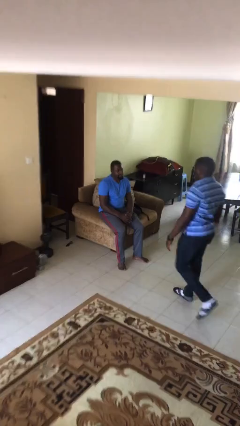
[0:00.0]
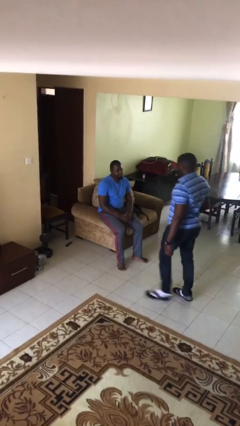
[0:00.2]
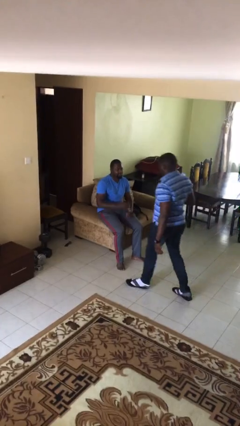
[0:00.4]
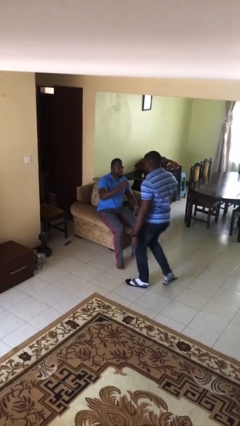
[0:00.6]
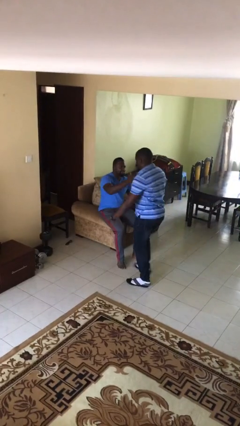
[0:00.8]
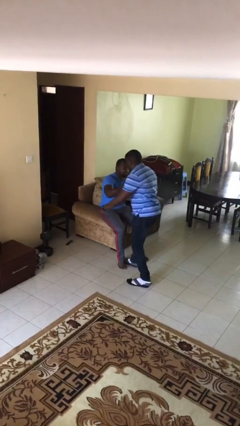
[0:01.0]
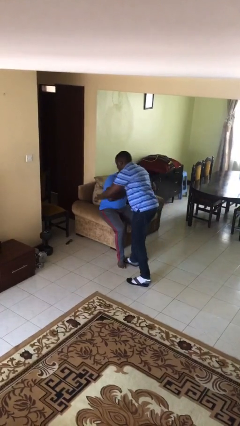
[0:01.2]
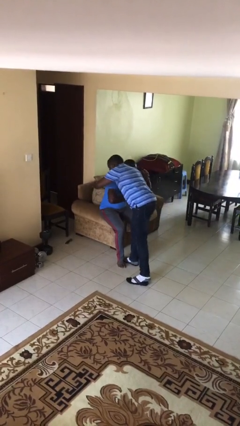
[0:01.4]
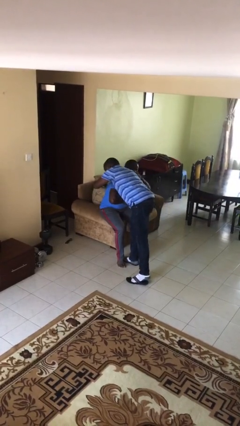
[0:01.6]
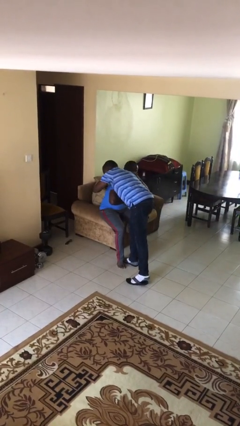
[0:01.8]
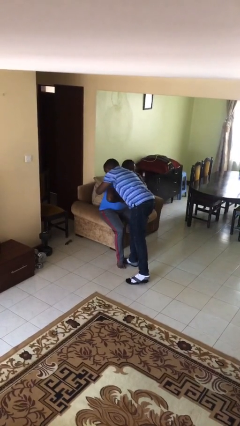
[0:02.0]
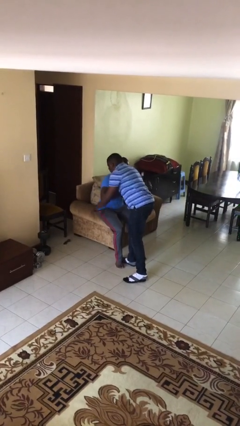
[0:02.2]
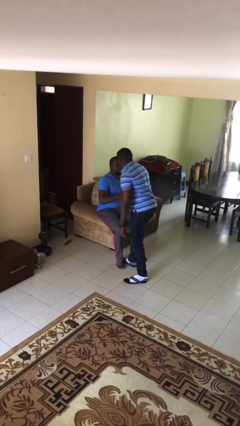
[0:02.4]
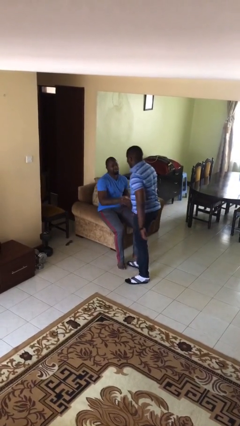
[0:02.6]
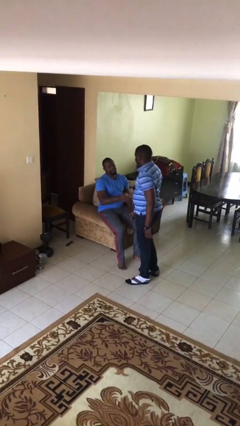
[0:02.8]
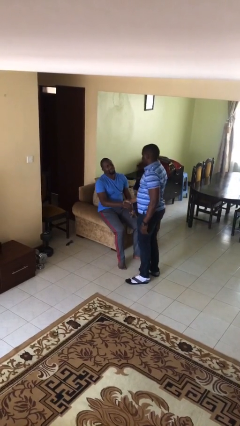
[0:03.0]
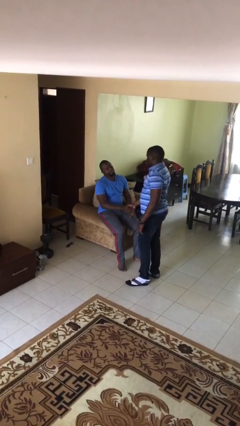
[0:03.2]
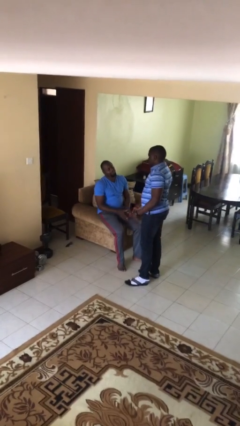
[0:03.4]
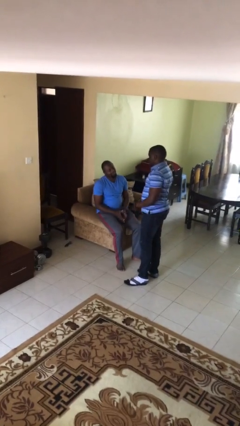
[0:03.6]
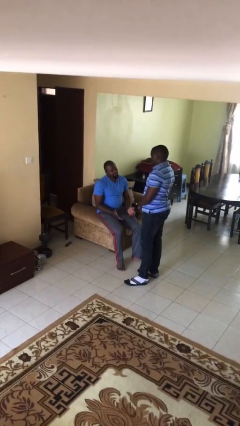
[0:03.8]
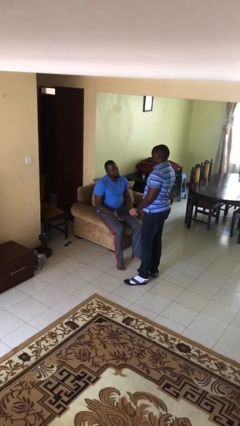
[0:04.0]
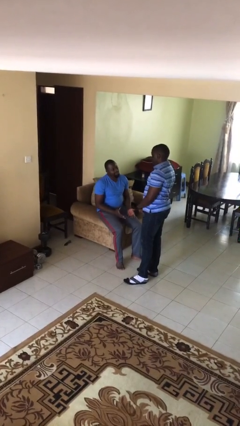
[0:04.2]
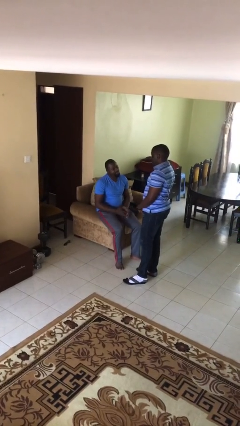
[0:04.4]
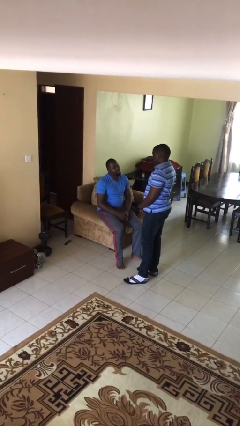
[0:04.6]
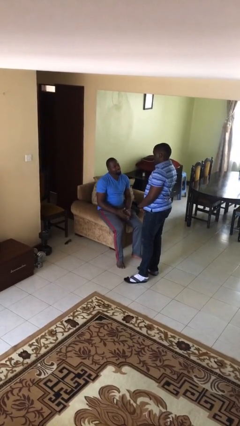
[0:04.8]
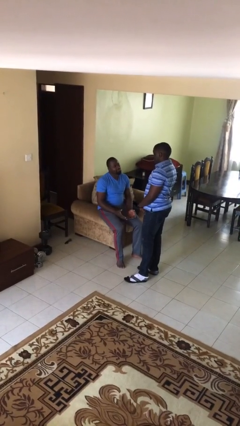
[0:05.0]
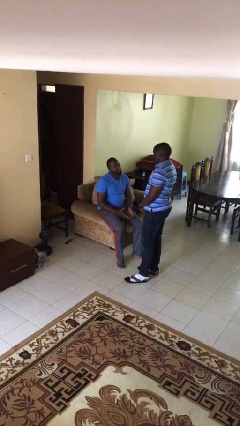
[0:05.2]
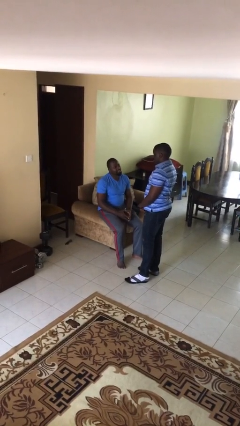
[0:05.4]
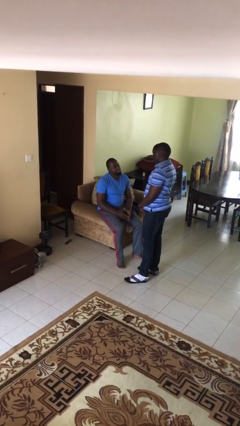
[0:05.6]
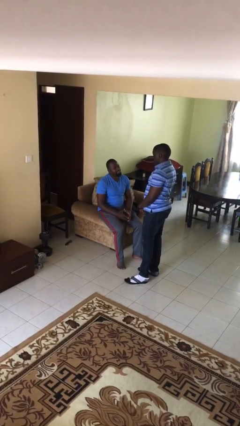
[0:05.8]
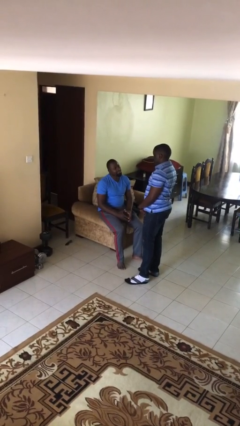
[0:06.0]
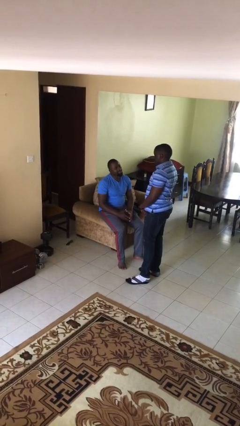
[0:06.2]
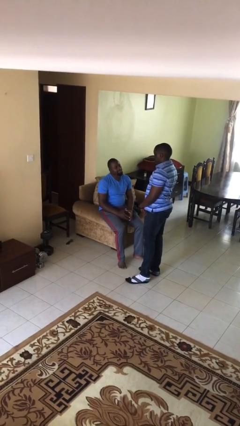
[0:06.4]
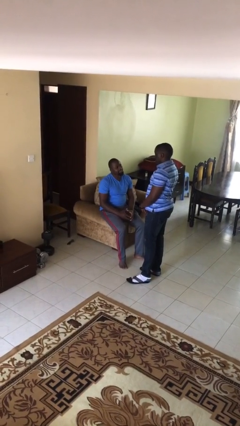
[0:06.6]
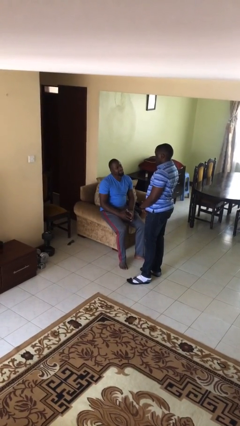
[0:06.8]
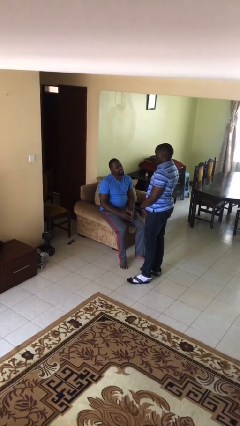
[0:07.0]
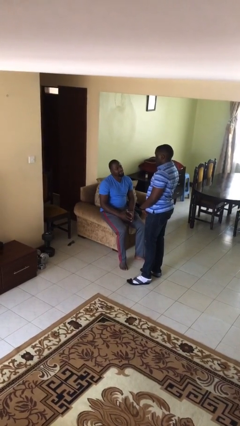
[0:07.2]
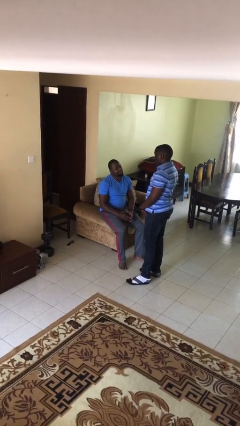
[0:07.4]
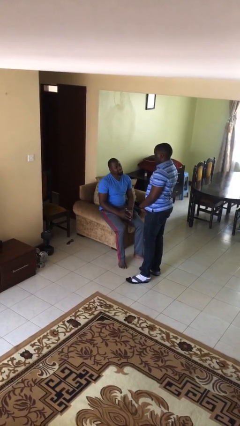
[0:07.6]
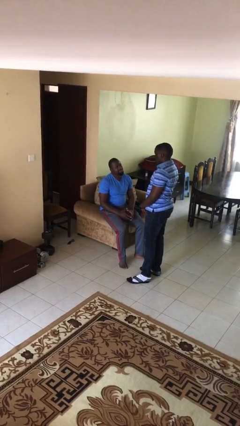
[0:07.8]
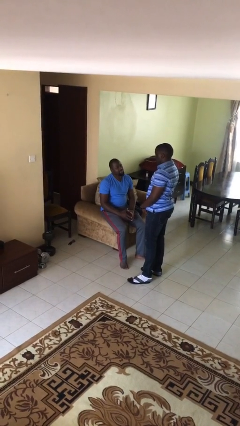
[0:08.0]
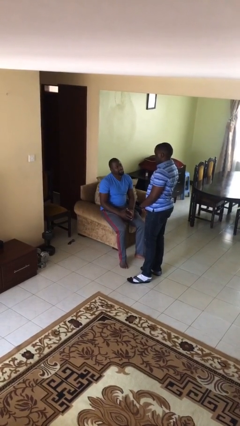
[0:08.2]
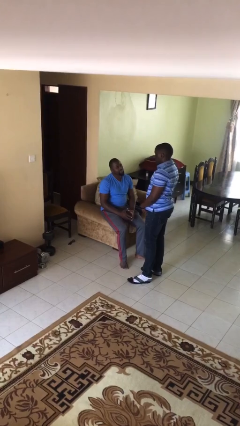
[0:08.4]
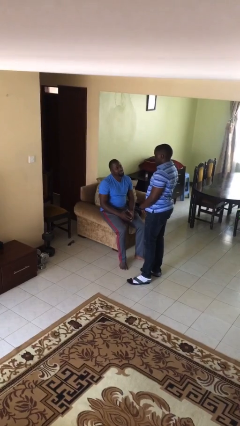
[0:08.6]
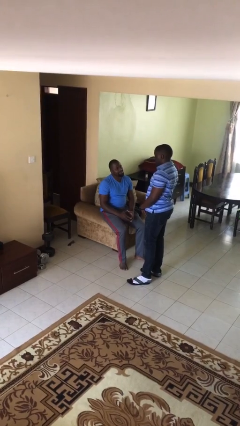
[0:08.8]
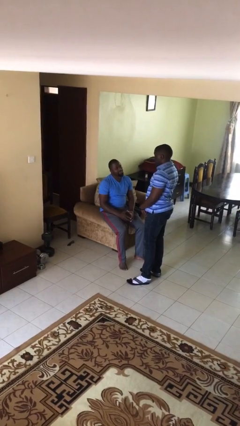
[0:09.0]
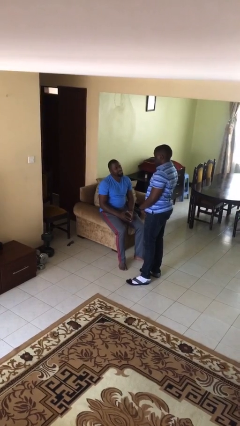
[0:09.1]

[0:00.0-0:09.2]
person embraces person

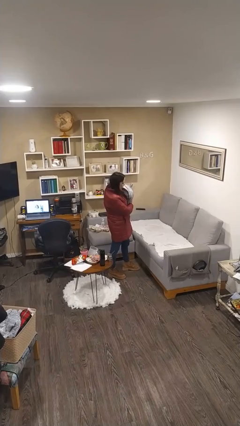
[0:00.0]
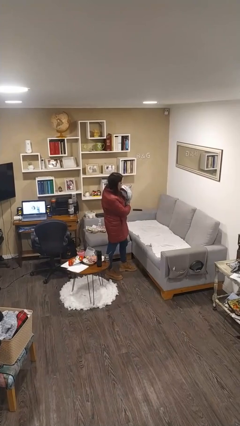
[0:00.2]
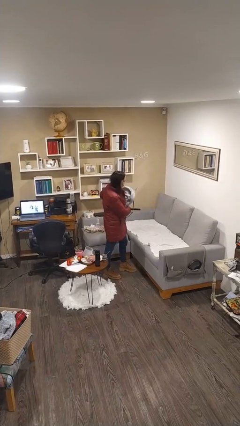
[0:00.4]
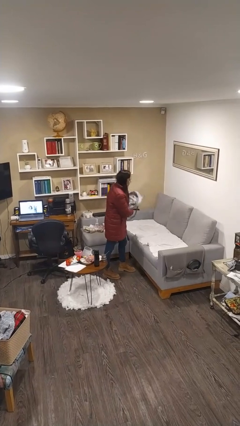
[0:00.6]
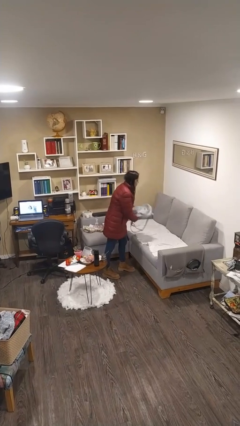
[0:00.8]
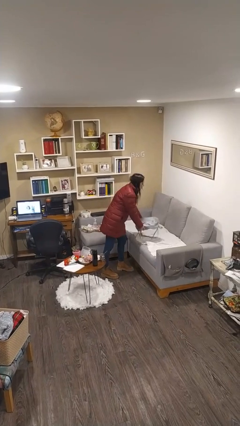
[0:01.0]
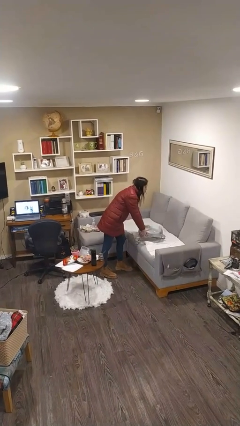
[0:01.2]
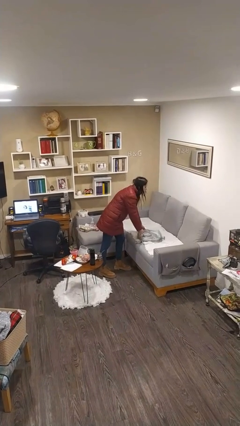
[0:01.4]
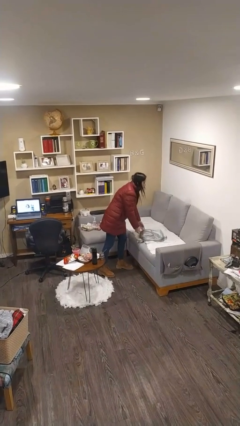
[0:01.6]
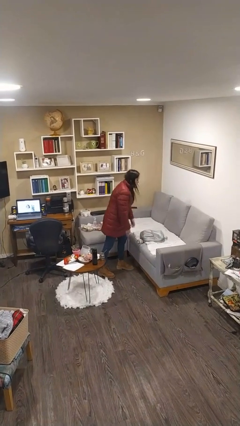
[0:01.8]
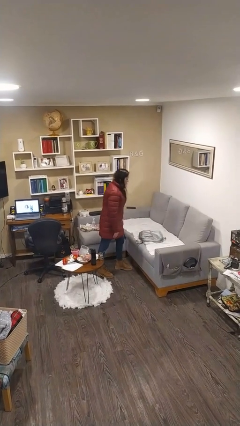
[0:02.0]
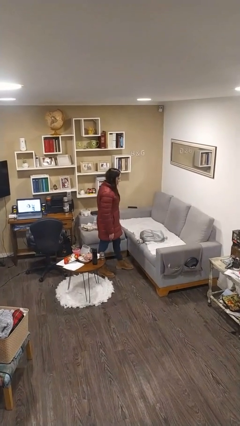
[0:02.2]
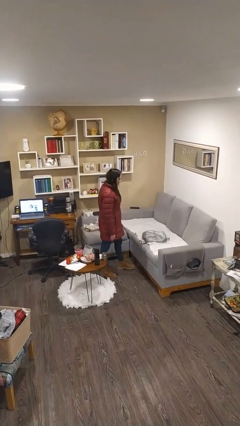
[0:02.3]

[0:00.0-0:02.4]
person puts down object on couch

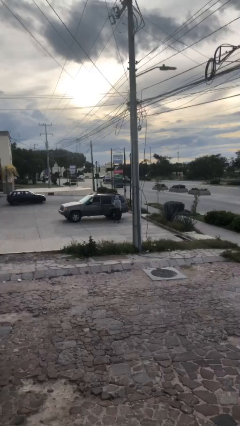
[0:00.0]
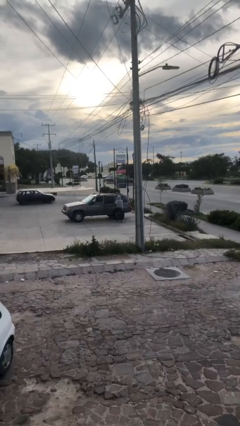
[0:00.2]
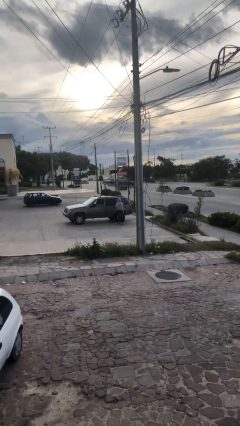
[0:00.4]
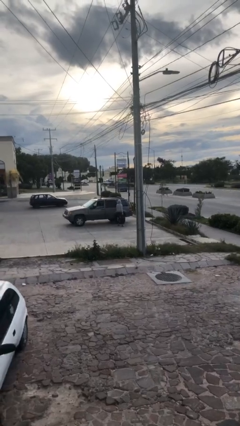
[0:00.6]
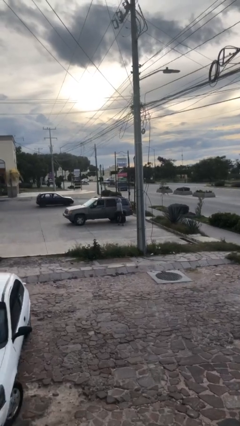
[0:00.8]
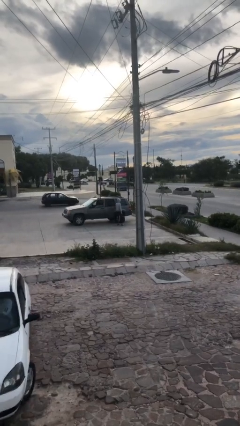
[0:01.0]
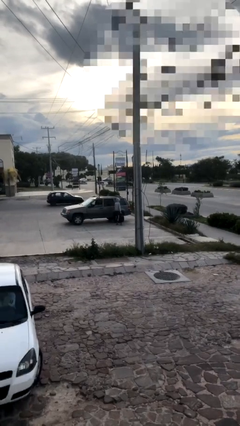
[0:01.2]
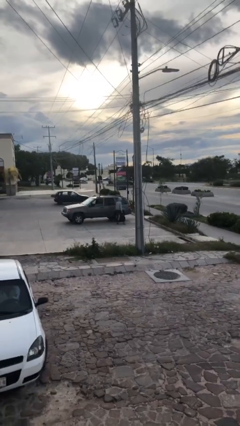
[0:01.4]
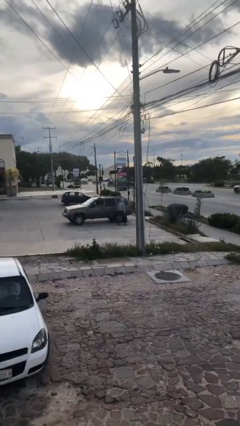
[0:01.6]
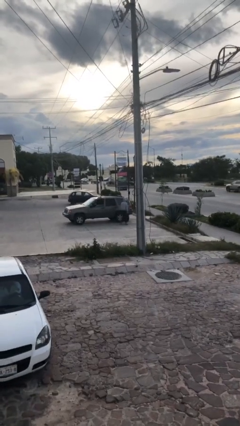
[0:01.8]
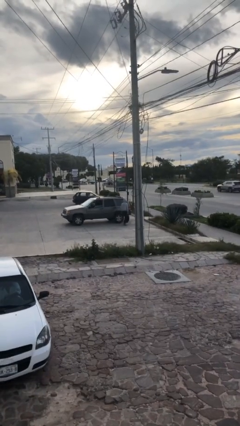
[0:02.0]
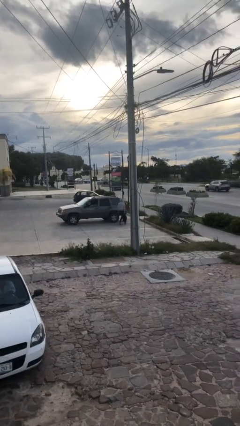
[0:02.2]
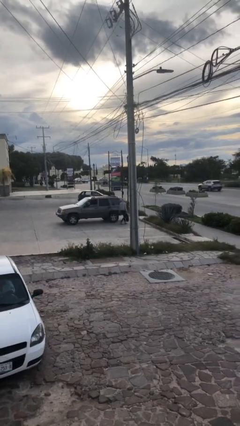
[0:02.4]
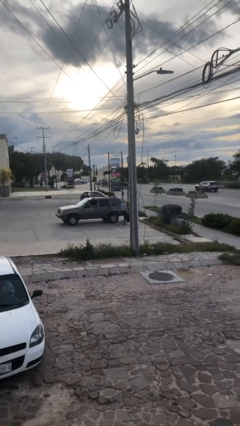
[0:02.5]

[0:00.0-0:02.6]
person closes car door

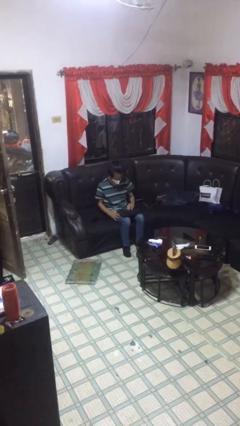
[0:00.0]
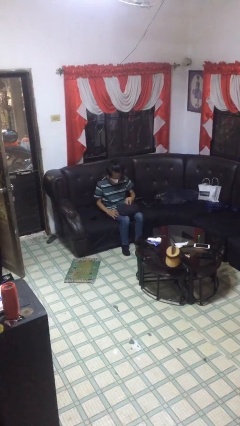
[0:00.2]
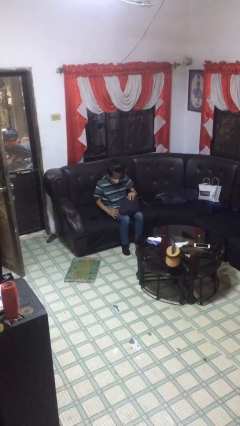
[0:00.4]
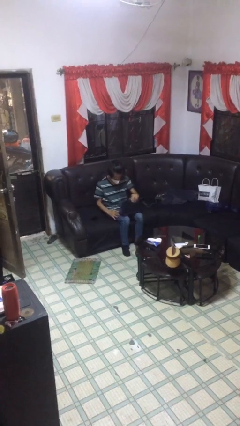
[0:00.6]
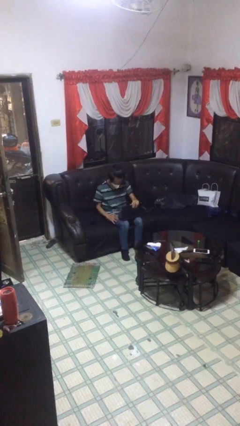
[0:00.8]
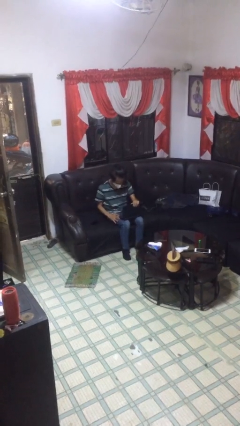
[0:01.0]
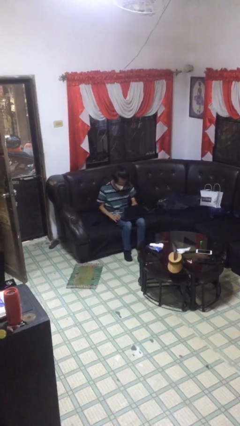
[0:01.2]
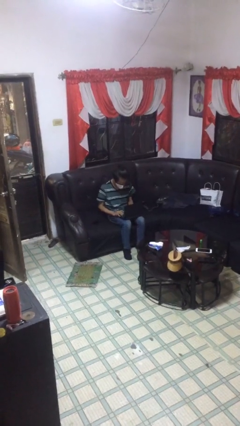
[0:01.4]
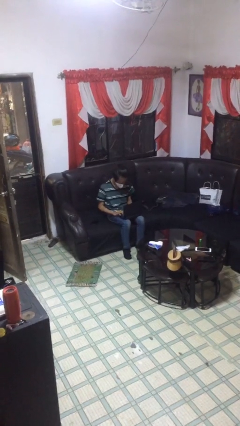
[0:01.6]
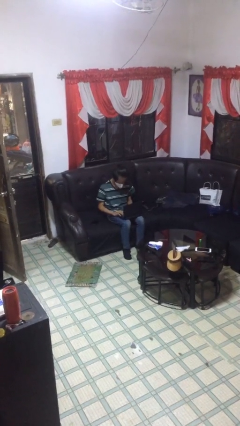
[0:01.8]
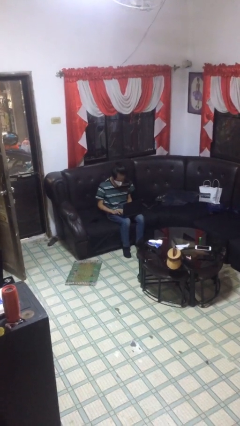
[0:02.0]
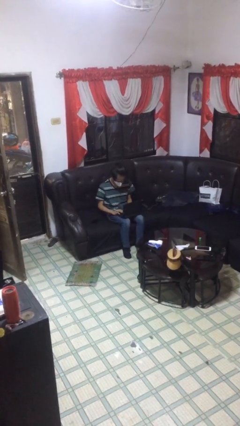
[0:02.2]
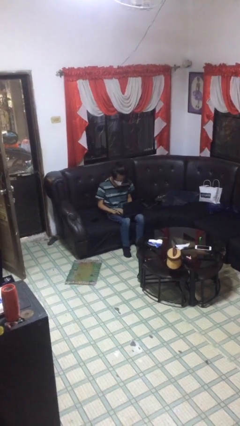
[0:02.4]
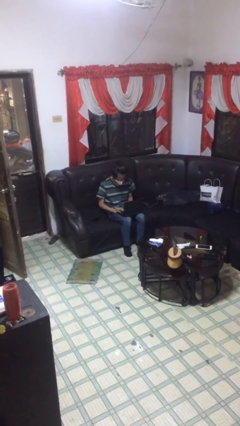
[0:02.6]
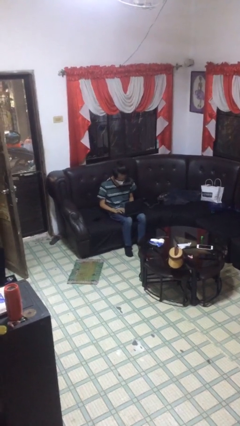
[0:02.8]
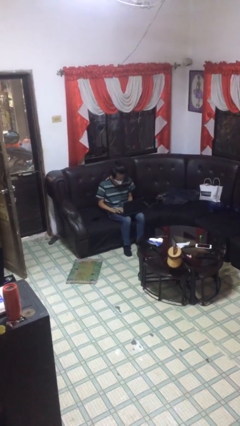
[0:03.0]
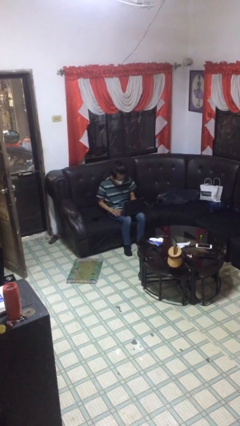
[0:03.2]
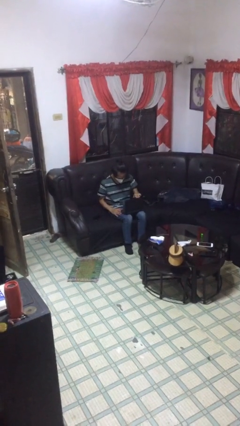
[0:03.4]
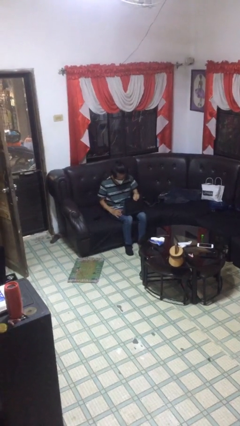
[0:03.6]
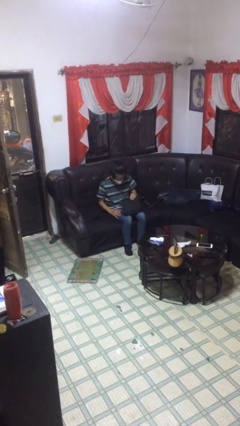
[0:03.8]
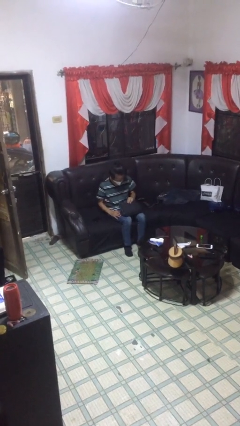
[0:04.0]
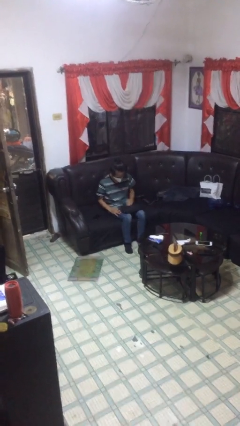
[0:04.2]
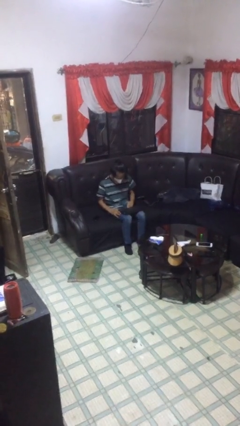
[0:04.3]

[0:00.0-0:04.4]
person interacts with laptop
